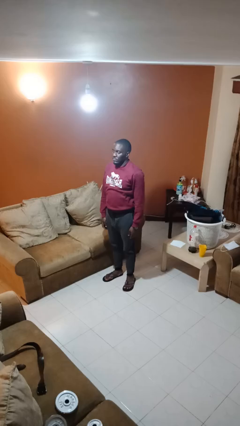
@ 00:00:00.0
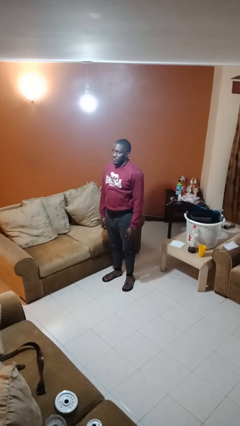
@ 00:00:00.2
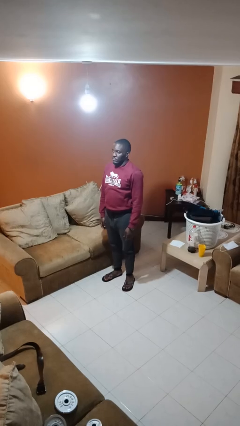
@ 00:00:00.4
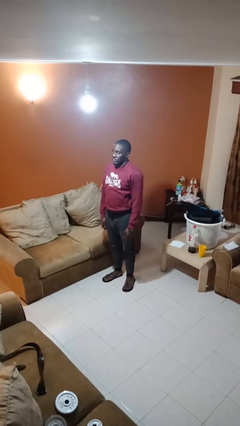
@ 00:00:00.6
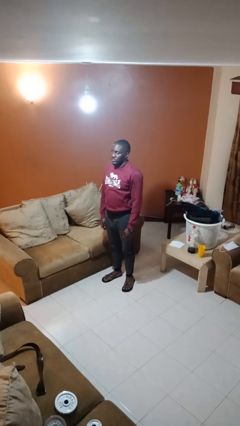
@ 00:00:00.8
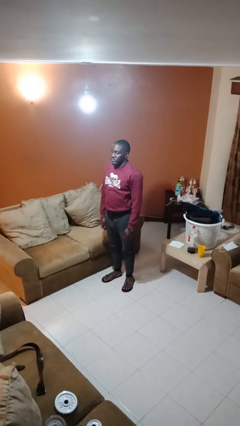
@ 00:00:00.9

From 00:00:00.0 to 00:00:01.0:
person gestures swipe right

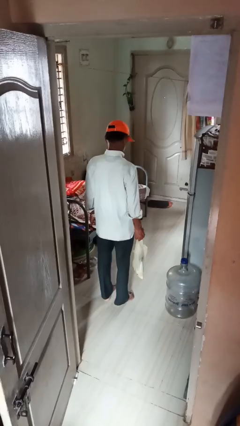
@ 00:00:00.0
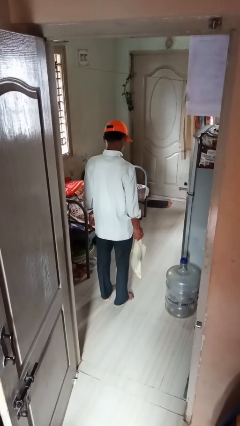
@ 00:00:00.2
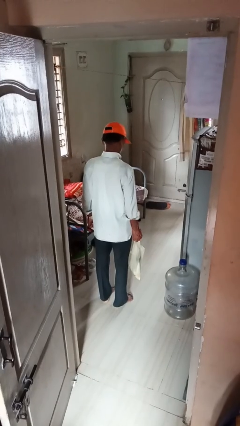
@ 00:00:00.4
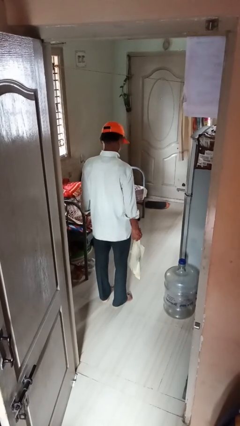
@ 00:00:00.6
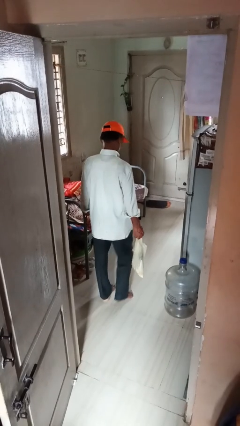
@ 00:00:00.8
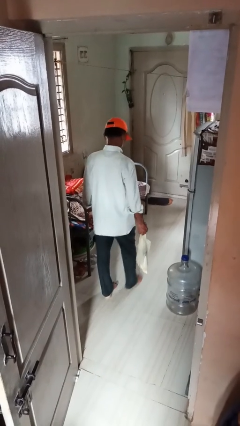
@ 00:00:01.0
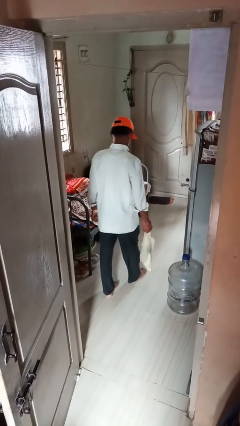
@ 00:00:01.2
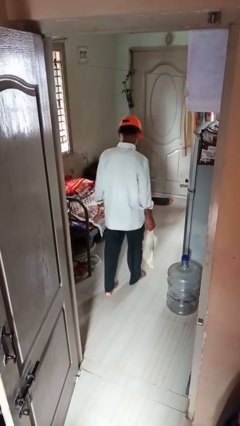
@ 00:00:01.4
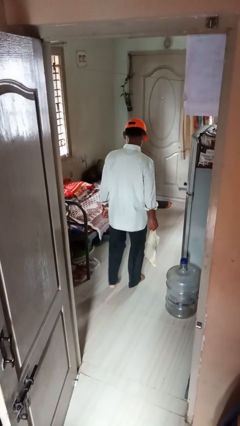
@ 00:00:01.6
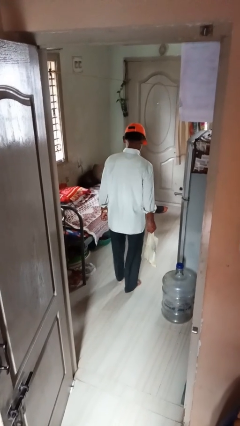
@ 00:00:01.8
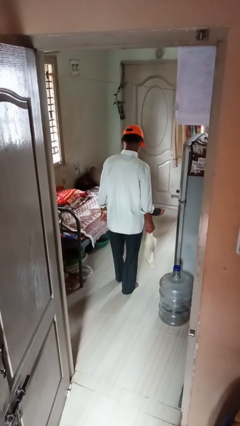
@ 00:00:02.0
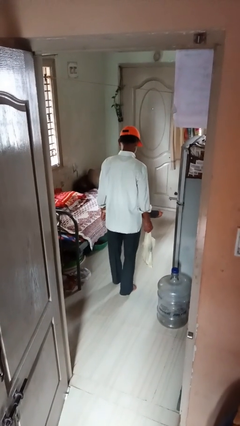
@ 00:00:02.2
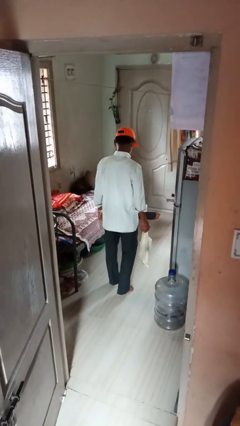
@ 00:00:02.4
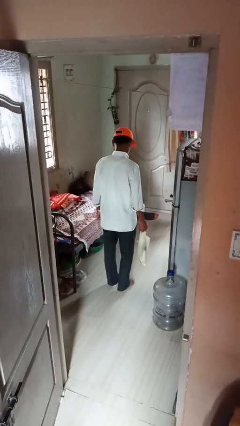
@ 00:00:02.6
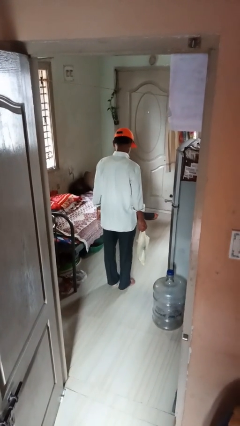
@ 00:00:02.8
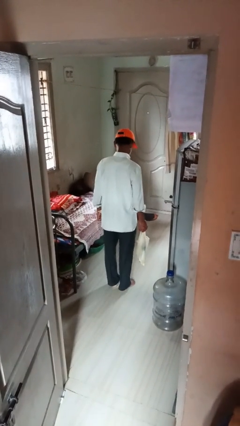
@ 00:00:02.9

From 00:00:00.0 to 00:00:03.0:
person carries groceries

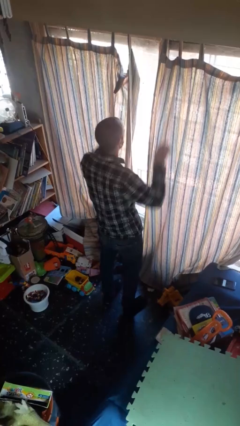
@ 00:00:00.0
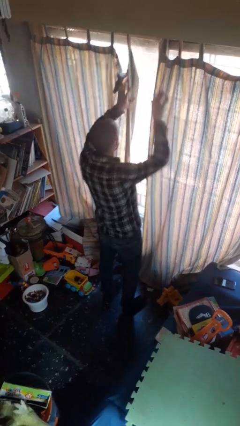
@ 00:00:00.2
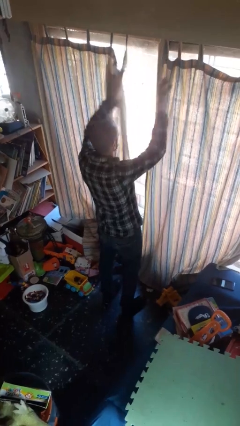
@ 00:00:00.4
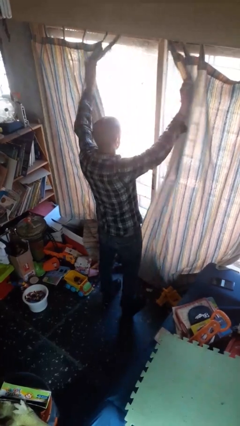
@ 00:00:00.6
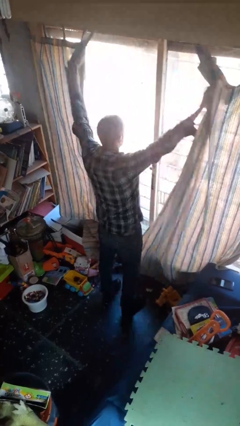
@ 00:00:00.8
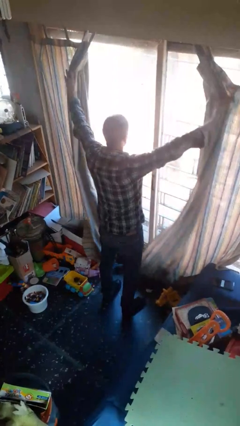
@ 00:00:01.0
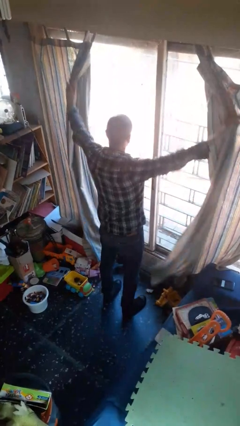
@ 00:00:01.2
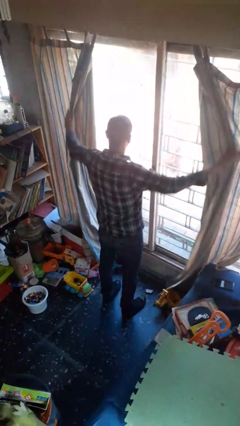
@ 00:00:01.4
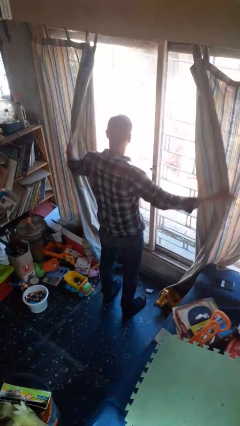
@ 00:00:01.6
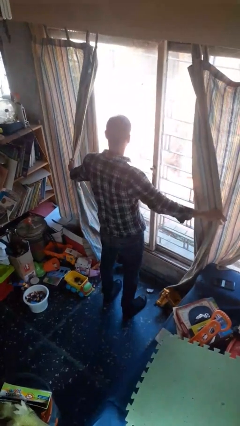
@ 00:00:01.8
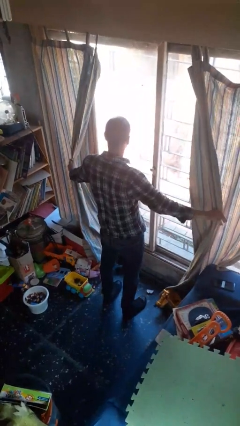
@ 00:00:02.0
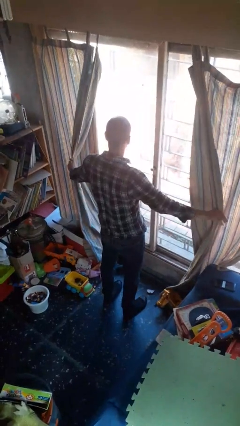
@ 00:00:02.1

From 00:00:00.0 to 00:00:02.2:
person opens curtains

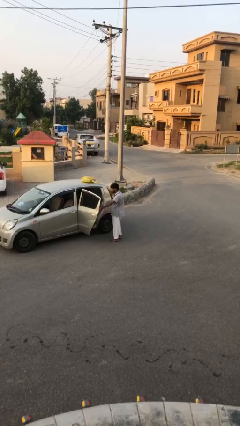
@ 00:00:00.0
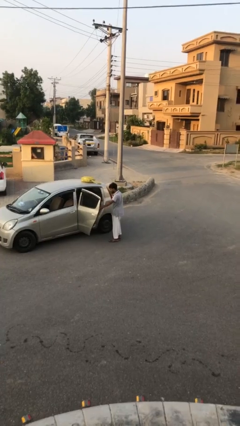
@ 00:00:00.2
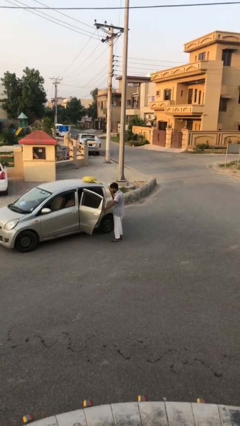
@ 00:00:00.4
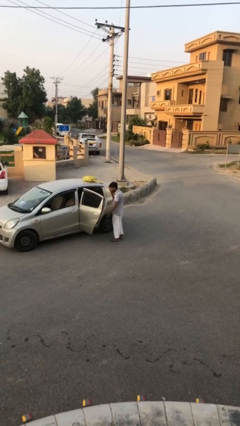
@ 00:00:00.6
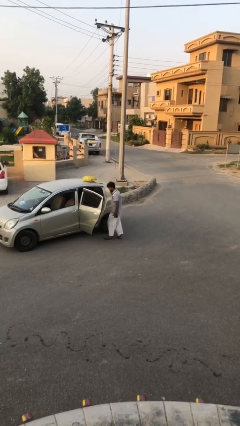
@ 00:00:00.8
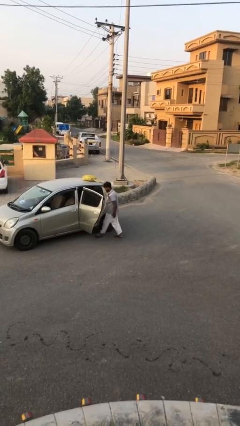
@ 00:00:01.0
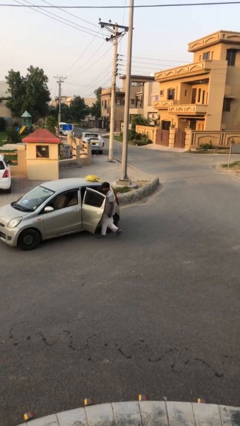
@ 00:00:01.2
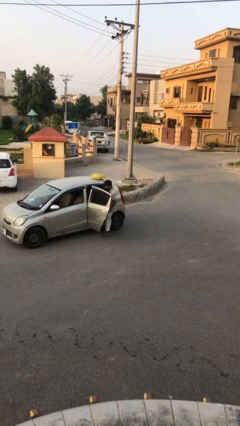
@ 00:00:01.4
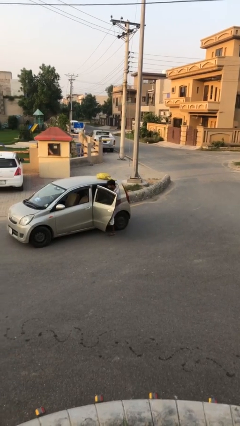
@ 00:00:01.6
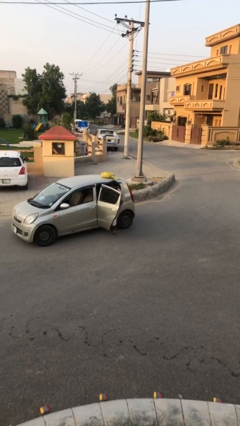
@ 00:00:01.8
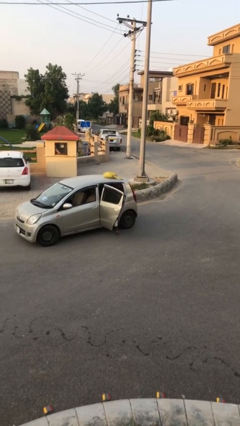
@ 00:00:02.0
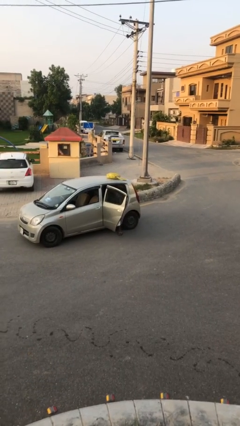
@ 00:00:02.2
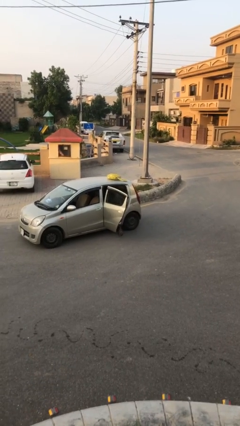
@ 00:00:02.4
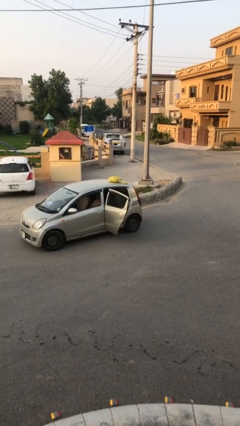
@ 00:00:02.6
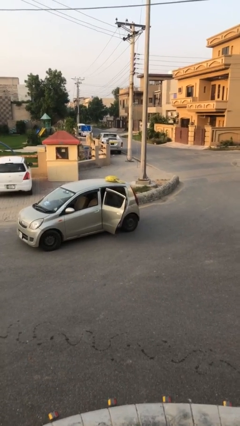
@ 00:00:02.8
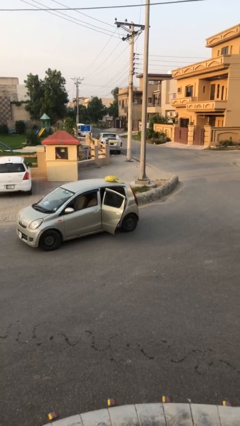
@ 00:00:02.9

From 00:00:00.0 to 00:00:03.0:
person enters car

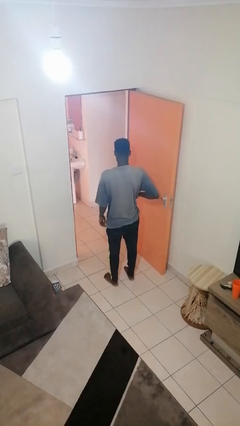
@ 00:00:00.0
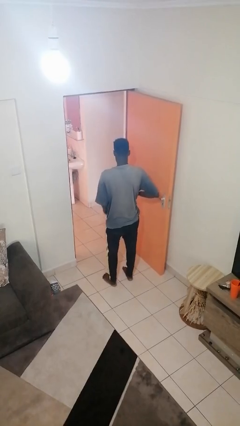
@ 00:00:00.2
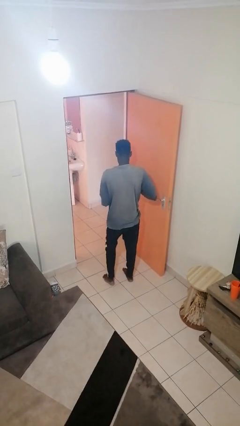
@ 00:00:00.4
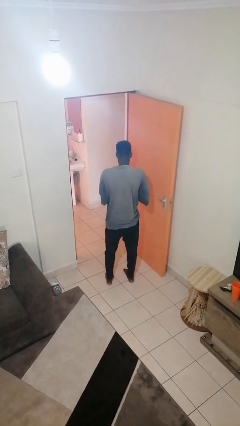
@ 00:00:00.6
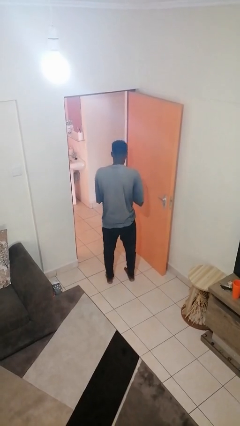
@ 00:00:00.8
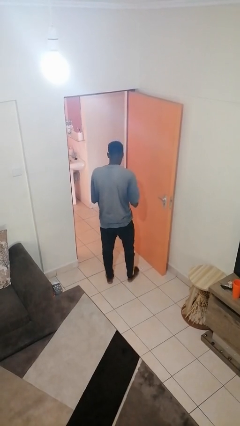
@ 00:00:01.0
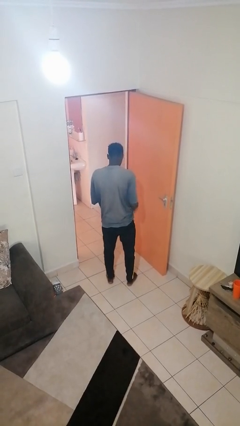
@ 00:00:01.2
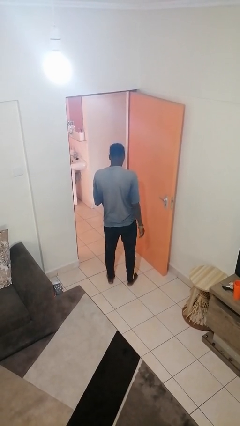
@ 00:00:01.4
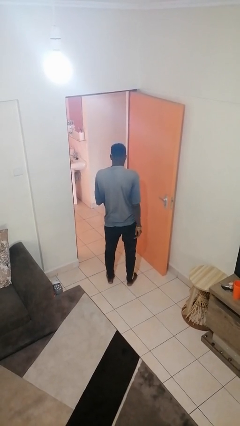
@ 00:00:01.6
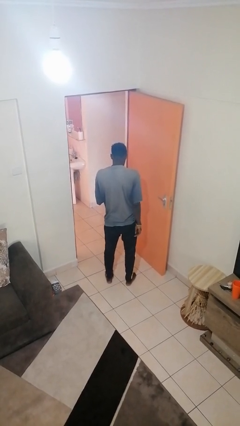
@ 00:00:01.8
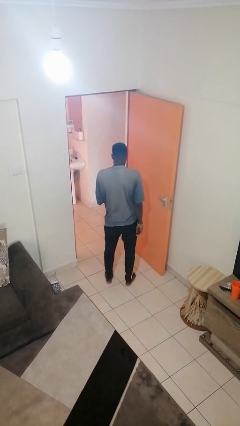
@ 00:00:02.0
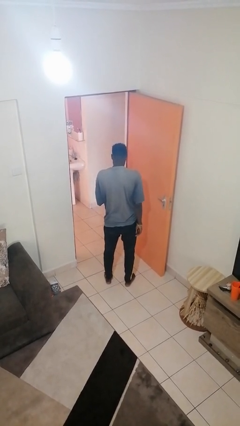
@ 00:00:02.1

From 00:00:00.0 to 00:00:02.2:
person takes phone from pocket

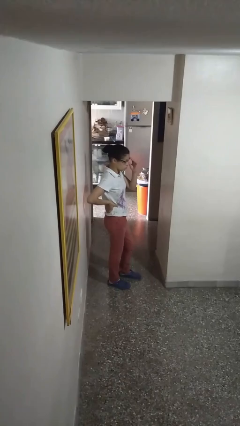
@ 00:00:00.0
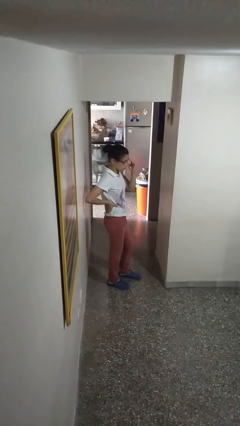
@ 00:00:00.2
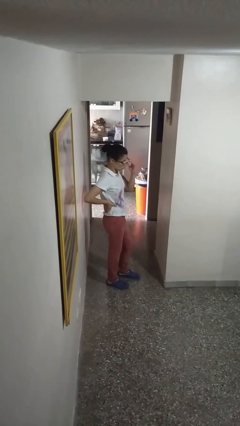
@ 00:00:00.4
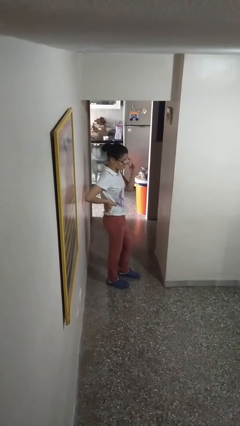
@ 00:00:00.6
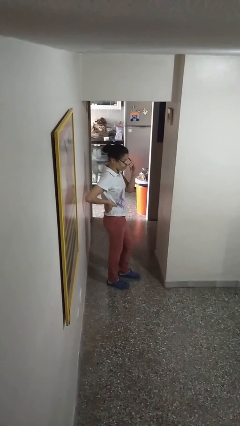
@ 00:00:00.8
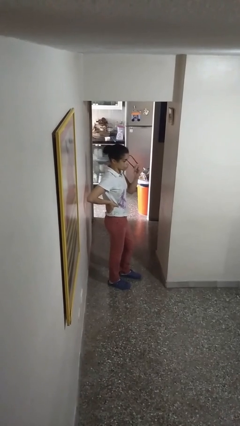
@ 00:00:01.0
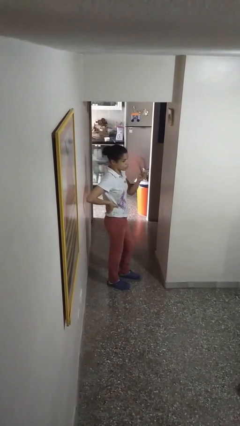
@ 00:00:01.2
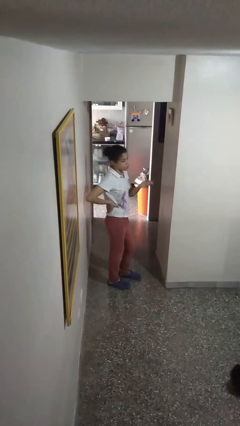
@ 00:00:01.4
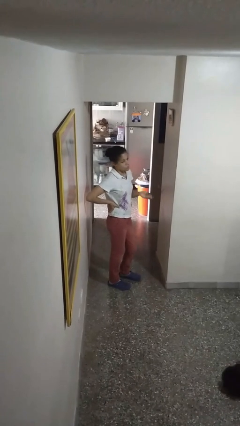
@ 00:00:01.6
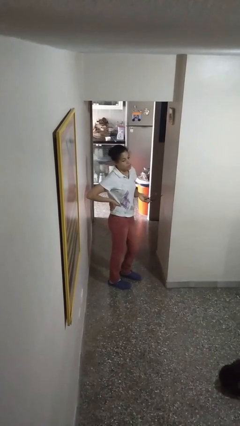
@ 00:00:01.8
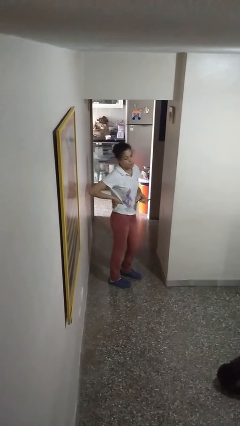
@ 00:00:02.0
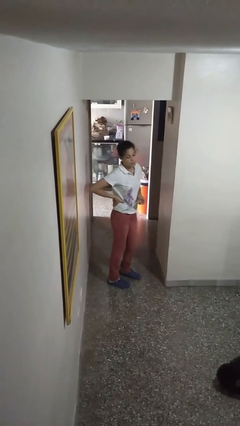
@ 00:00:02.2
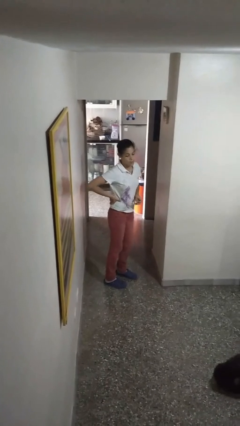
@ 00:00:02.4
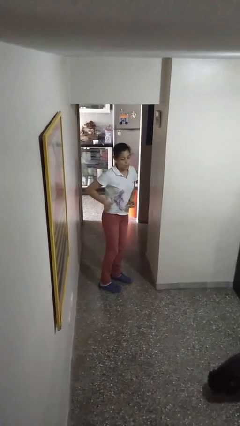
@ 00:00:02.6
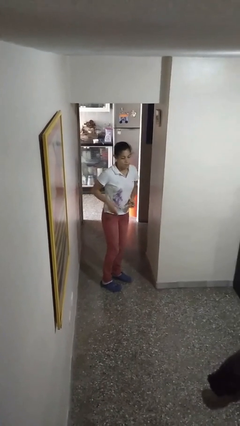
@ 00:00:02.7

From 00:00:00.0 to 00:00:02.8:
person takes off glasses

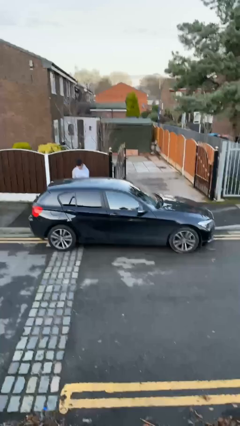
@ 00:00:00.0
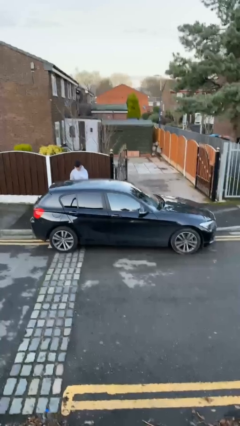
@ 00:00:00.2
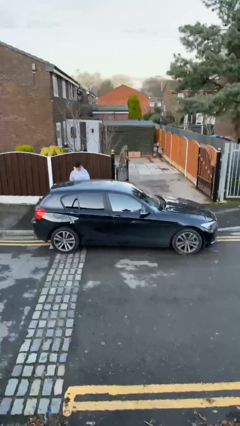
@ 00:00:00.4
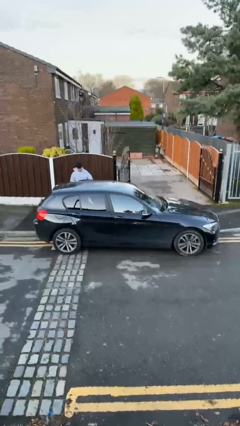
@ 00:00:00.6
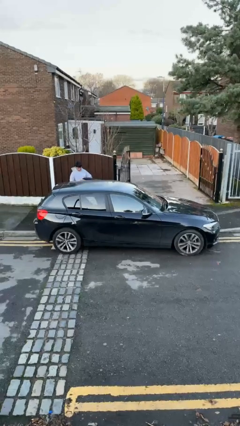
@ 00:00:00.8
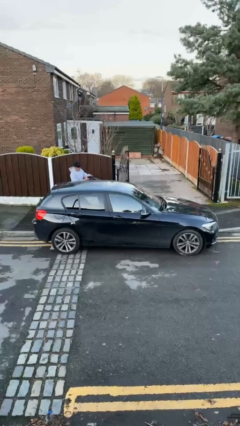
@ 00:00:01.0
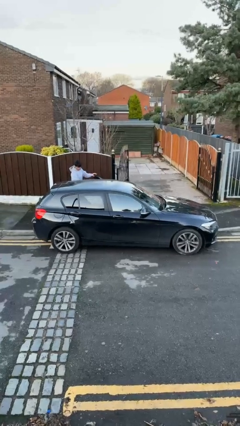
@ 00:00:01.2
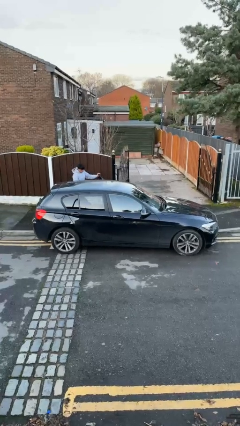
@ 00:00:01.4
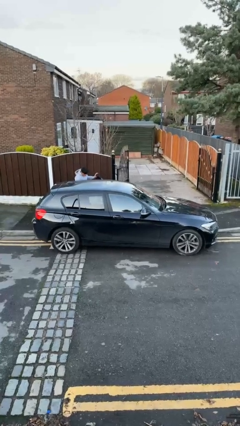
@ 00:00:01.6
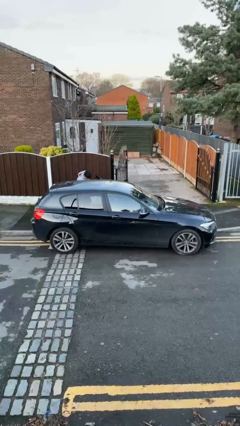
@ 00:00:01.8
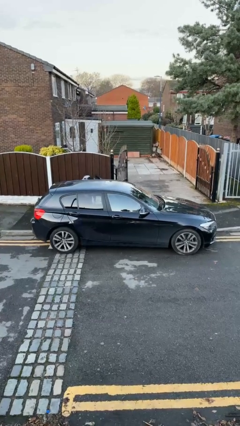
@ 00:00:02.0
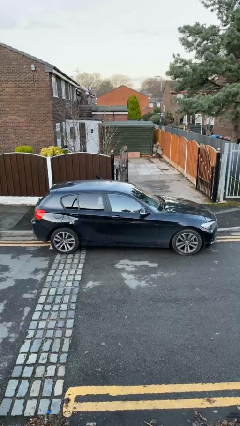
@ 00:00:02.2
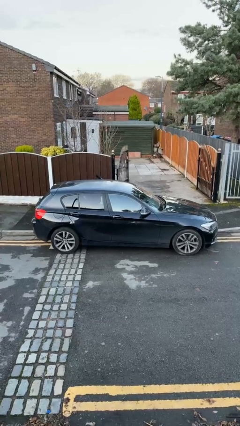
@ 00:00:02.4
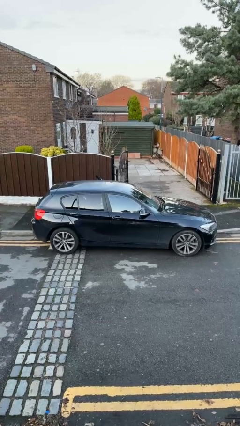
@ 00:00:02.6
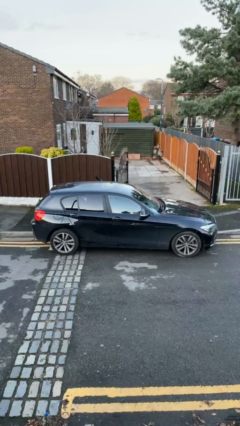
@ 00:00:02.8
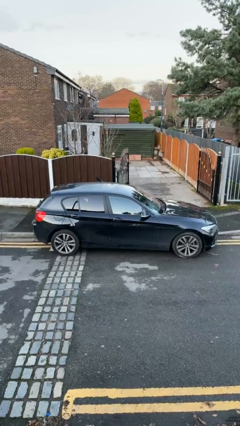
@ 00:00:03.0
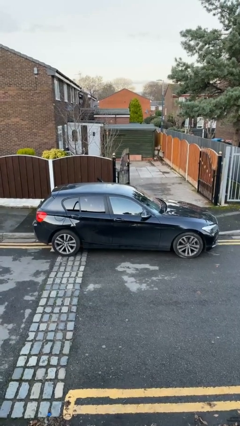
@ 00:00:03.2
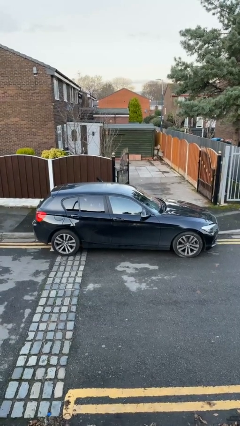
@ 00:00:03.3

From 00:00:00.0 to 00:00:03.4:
car picks up person
